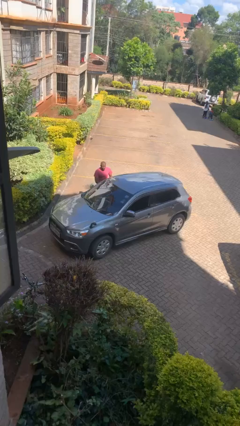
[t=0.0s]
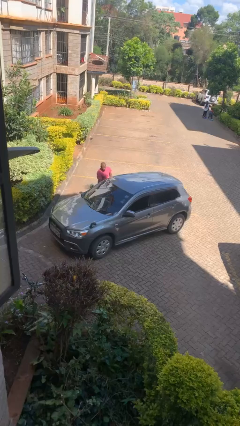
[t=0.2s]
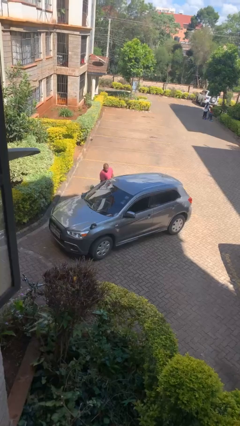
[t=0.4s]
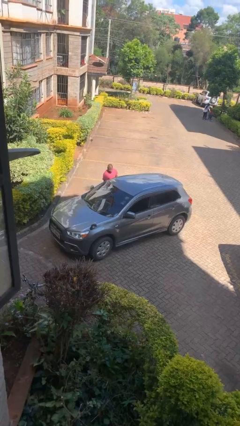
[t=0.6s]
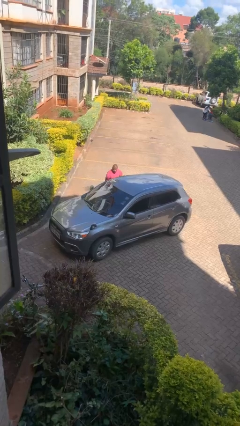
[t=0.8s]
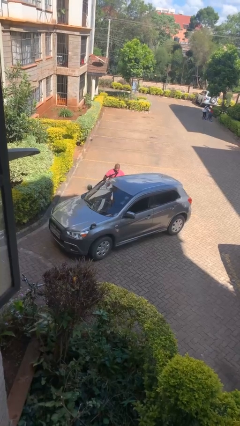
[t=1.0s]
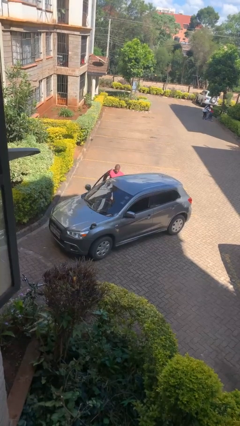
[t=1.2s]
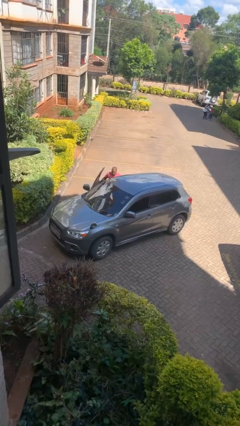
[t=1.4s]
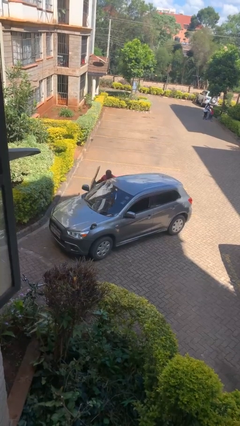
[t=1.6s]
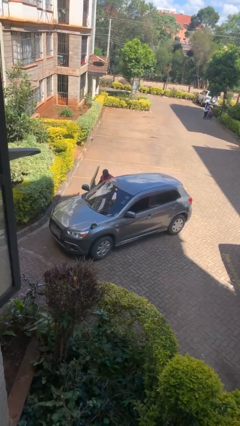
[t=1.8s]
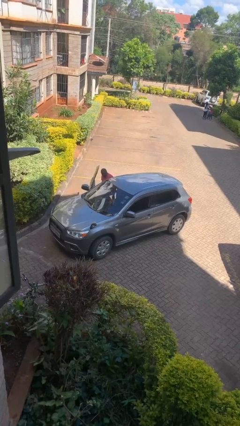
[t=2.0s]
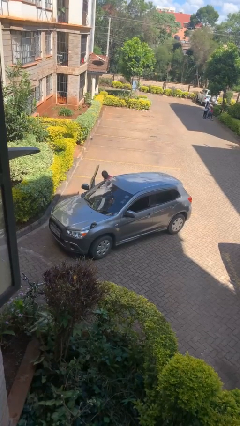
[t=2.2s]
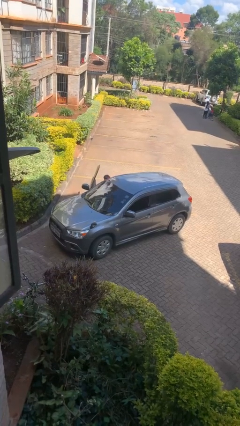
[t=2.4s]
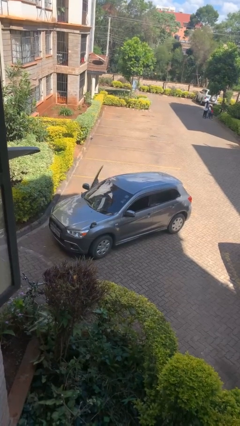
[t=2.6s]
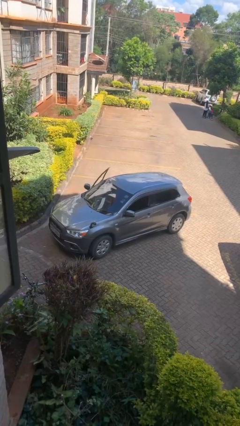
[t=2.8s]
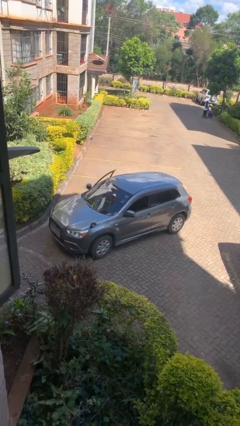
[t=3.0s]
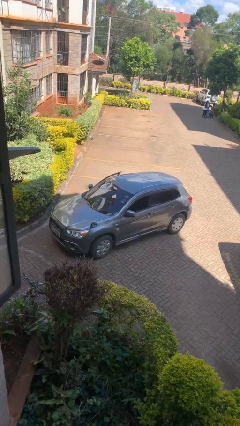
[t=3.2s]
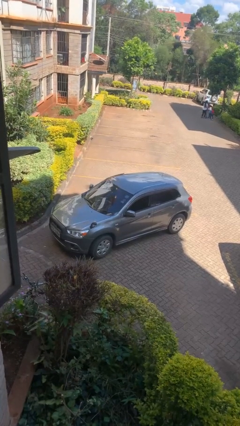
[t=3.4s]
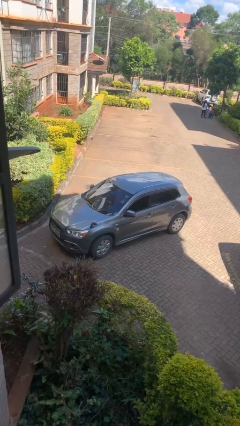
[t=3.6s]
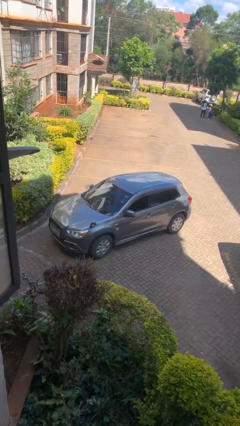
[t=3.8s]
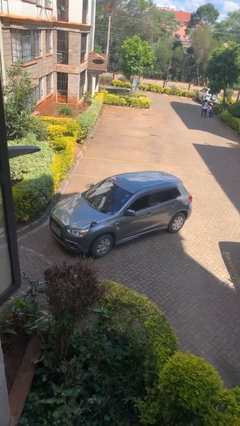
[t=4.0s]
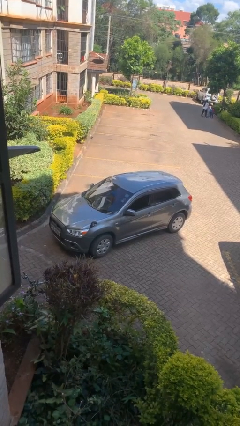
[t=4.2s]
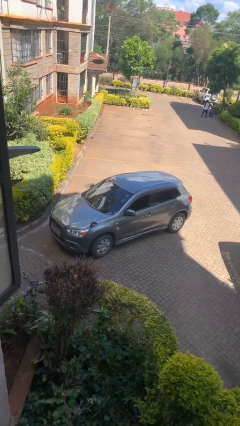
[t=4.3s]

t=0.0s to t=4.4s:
car picks up person

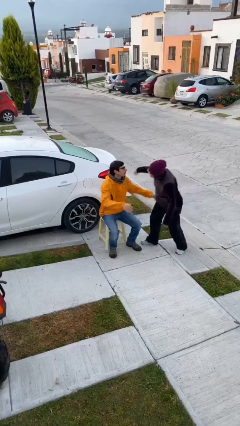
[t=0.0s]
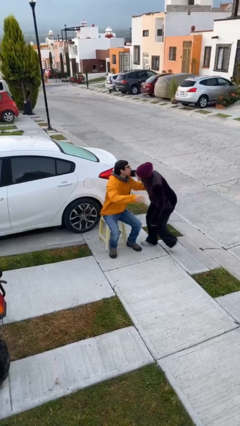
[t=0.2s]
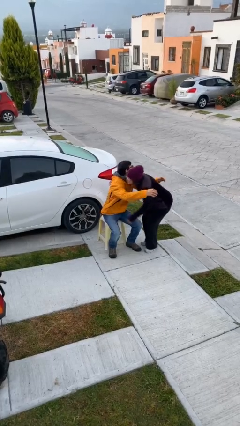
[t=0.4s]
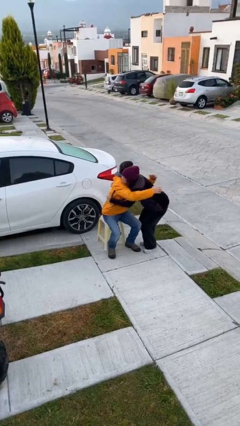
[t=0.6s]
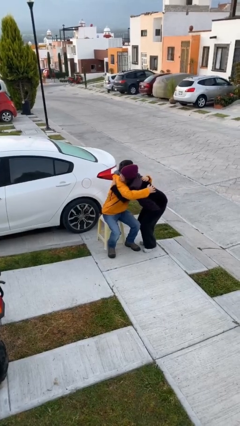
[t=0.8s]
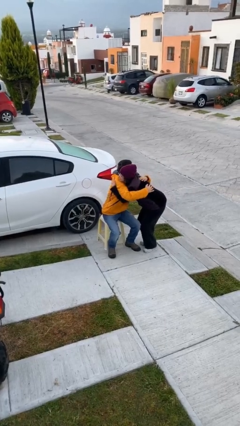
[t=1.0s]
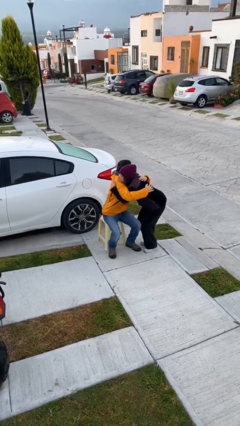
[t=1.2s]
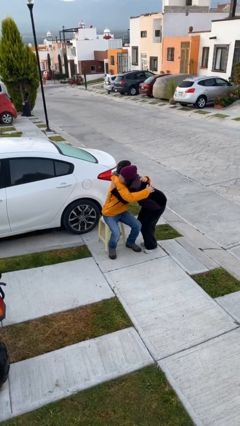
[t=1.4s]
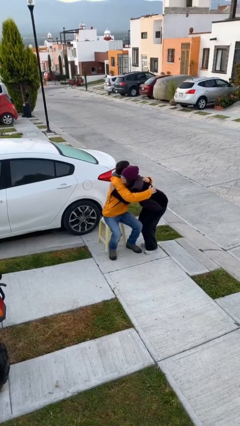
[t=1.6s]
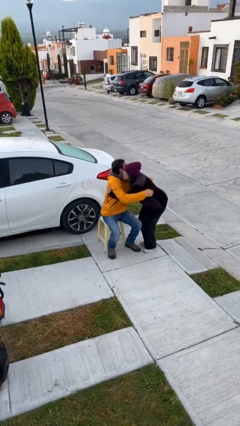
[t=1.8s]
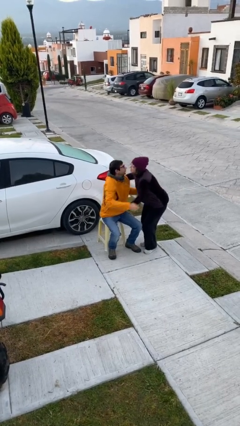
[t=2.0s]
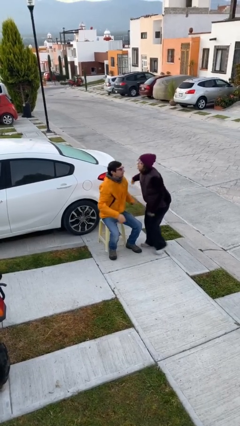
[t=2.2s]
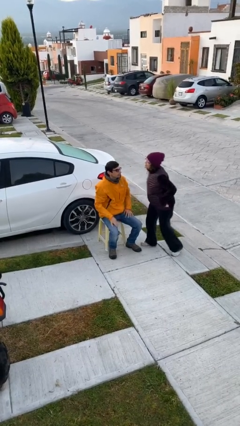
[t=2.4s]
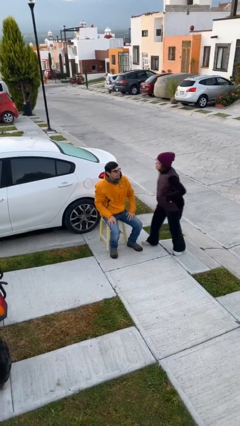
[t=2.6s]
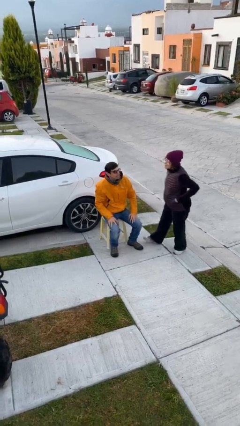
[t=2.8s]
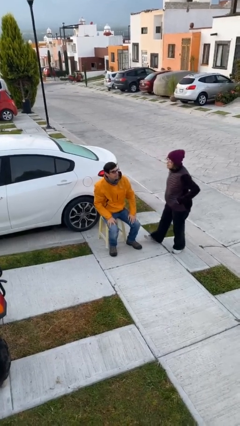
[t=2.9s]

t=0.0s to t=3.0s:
person embraces person

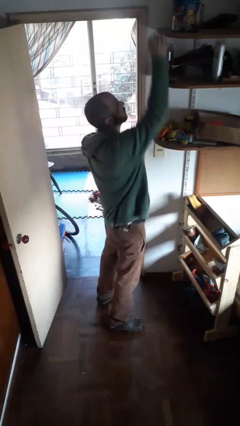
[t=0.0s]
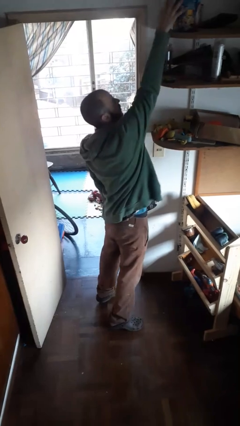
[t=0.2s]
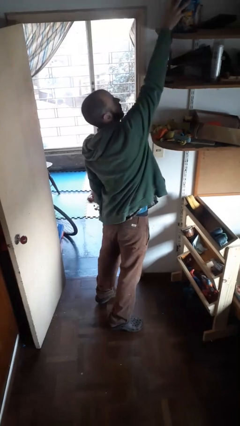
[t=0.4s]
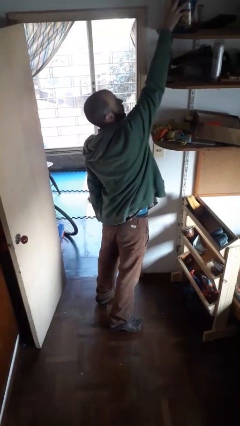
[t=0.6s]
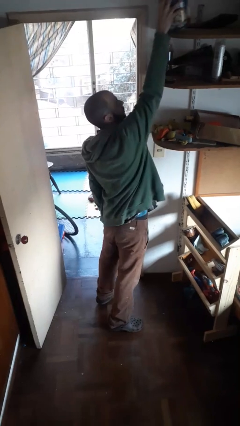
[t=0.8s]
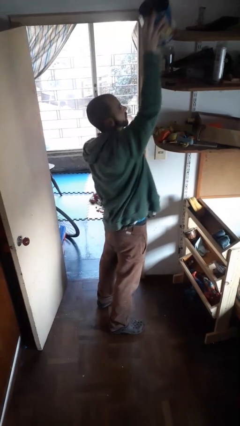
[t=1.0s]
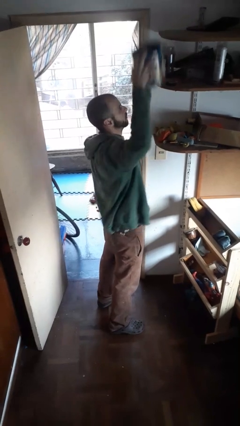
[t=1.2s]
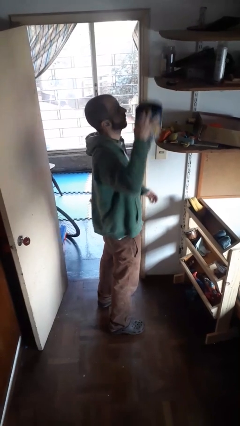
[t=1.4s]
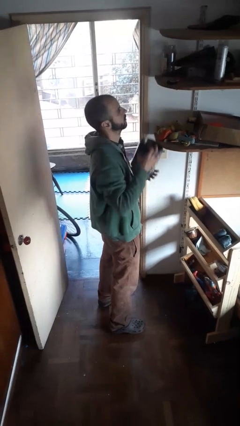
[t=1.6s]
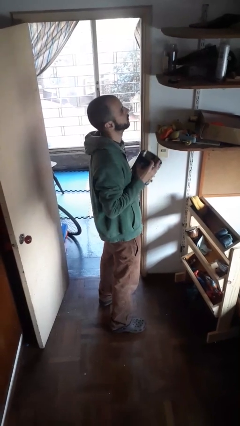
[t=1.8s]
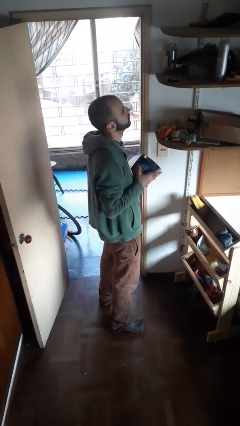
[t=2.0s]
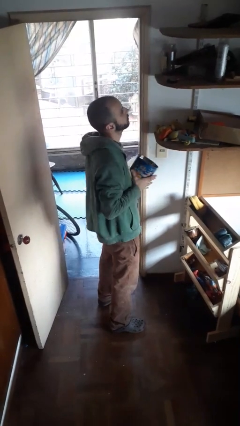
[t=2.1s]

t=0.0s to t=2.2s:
person picks up object from shelf

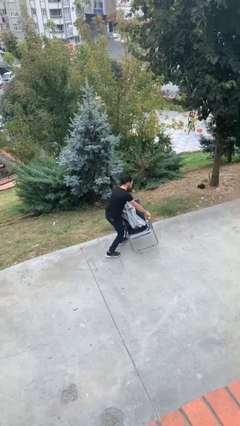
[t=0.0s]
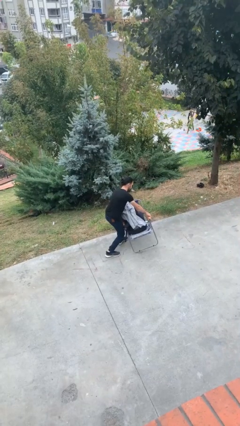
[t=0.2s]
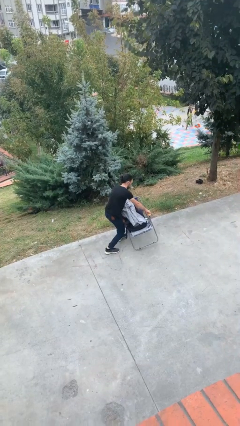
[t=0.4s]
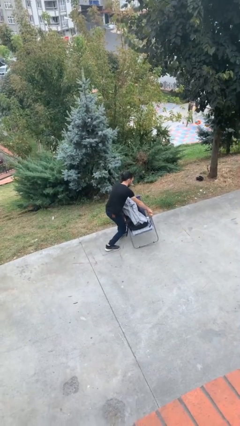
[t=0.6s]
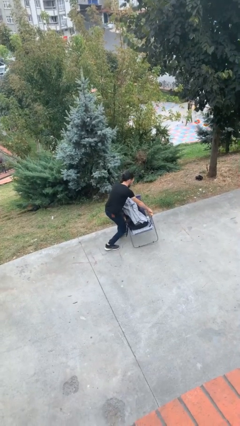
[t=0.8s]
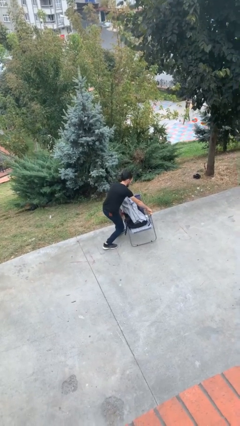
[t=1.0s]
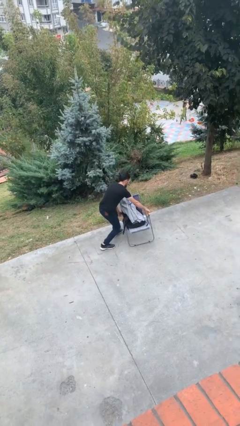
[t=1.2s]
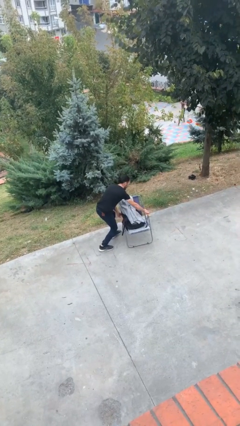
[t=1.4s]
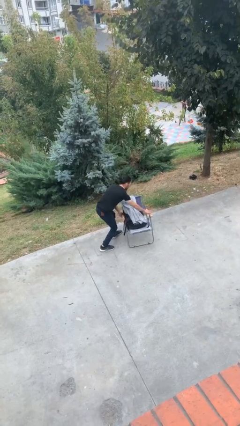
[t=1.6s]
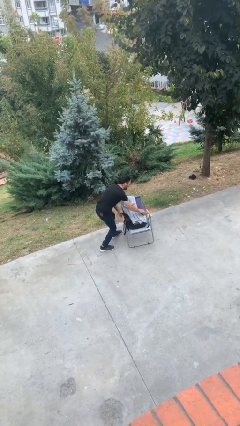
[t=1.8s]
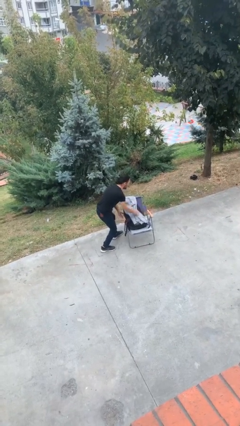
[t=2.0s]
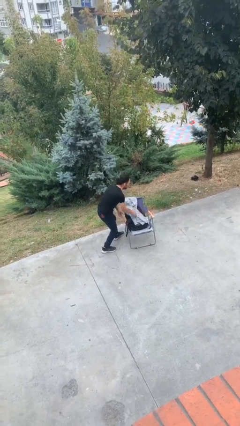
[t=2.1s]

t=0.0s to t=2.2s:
person puts down object on floor

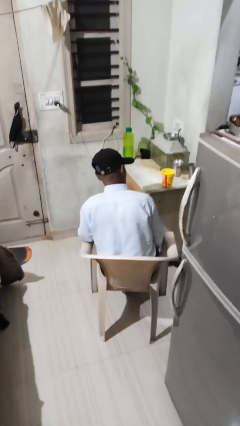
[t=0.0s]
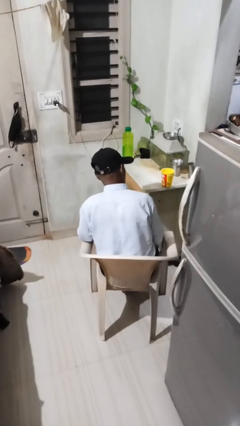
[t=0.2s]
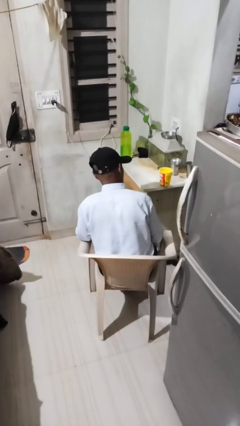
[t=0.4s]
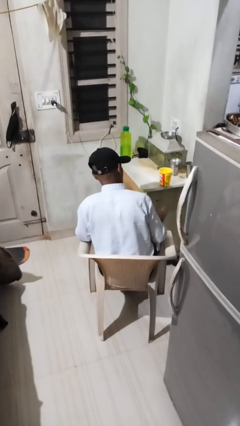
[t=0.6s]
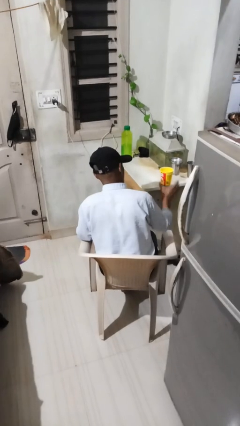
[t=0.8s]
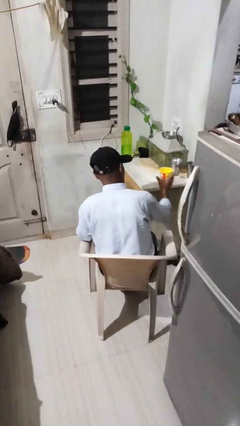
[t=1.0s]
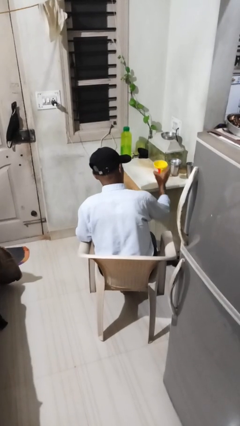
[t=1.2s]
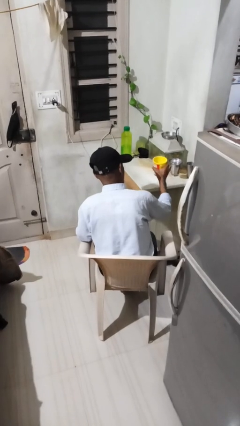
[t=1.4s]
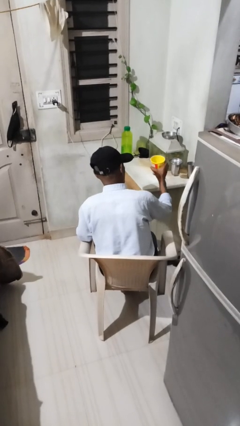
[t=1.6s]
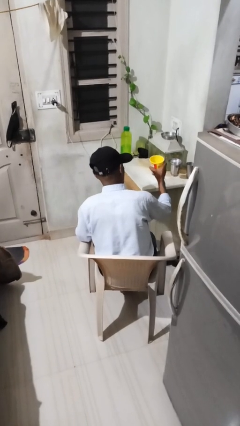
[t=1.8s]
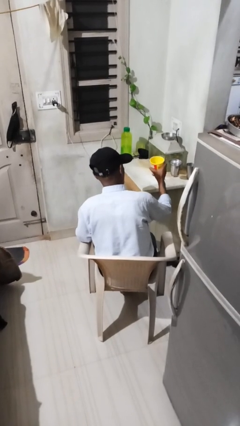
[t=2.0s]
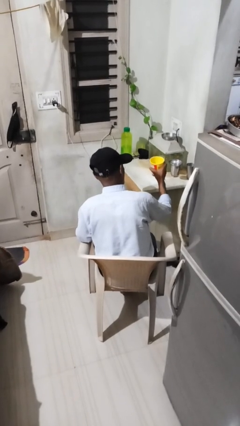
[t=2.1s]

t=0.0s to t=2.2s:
person picks up object from table

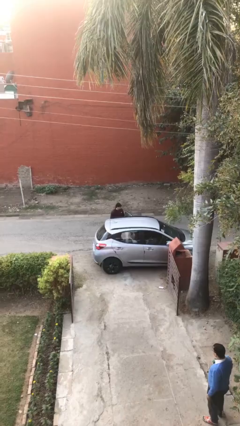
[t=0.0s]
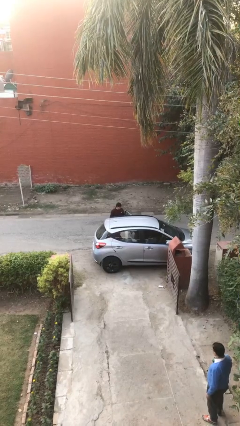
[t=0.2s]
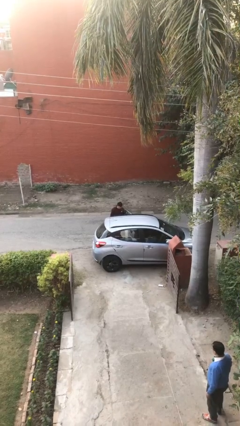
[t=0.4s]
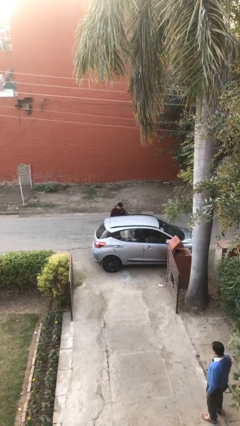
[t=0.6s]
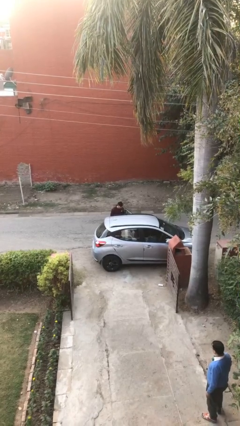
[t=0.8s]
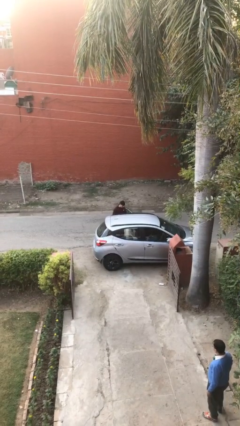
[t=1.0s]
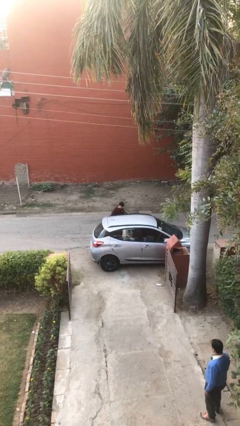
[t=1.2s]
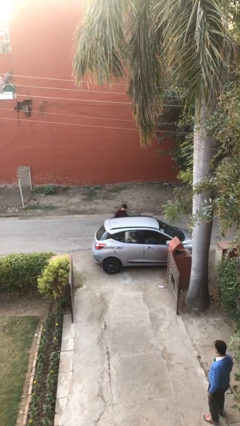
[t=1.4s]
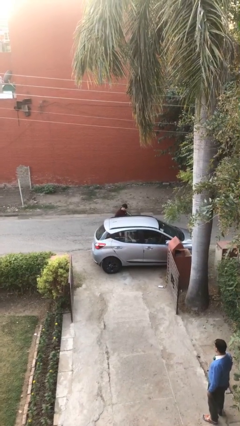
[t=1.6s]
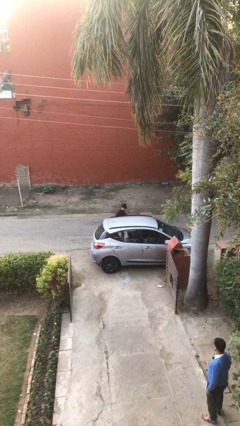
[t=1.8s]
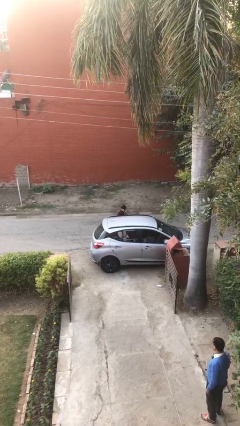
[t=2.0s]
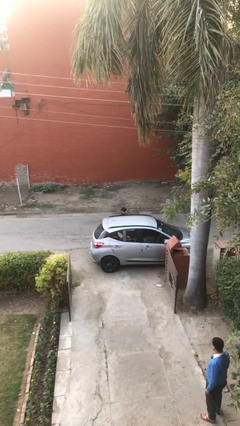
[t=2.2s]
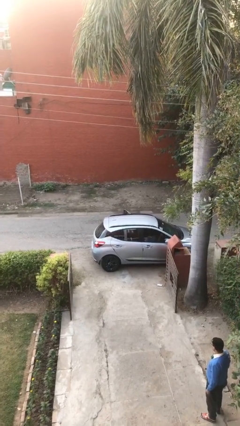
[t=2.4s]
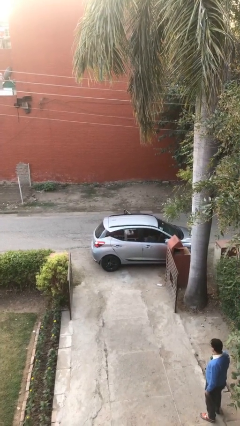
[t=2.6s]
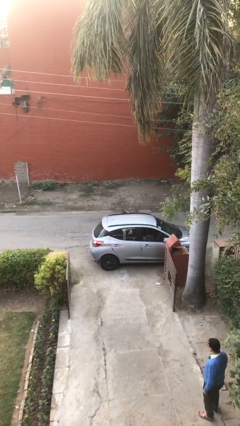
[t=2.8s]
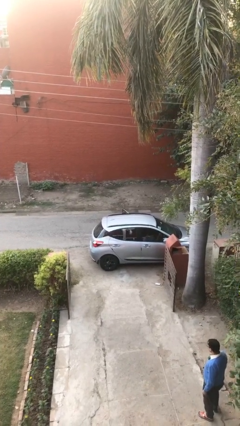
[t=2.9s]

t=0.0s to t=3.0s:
person enters car

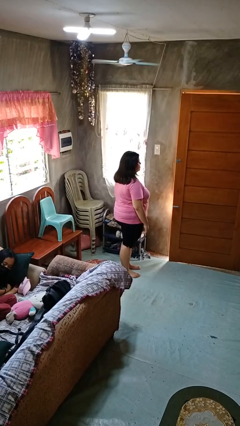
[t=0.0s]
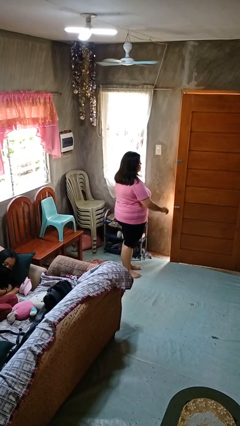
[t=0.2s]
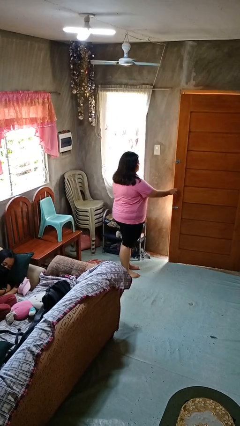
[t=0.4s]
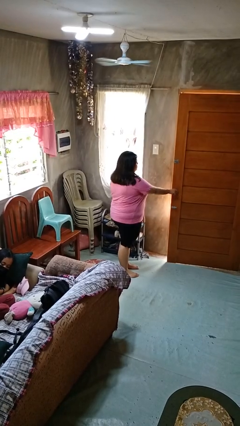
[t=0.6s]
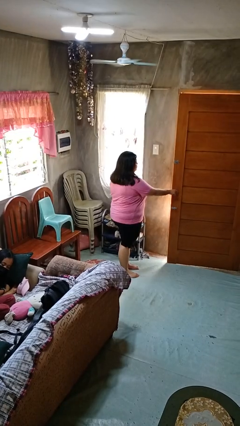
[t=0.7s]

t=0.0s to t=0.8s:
person opens facility door
